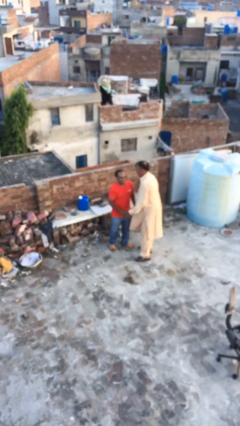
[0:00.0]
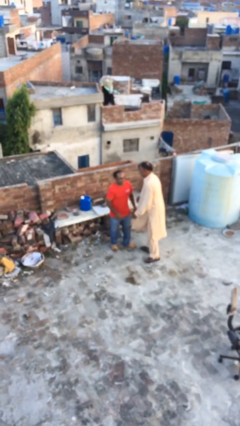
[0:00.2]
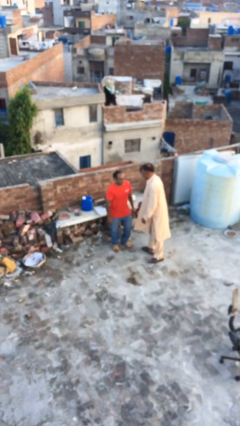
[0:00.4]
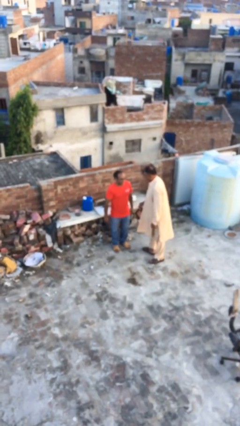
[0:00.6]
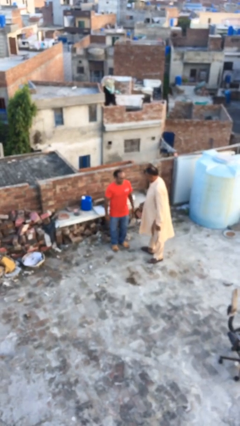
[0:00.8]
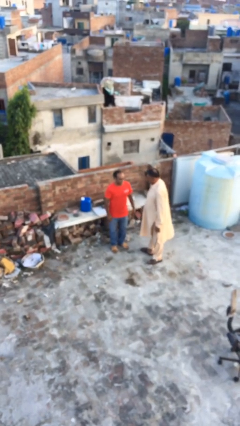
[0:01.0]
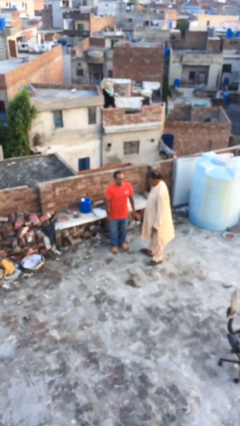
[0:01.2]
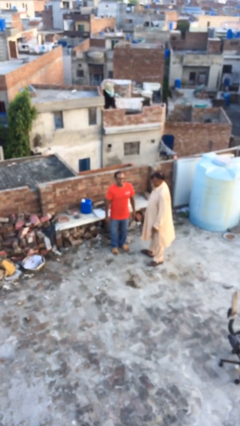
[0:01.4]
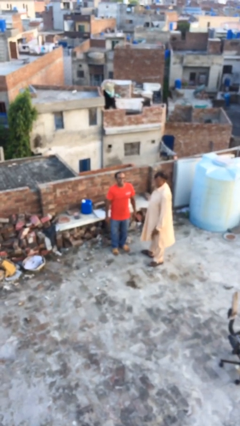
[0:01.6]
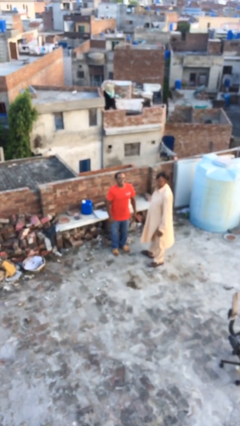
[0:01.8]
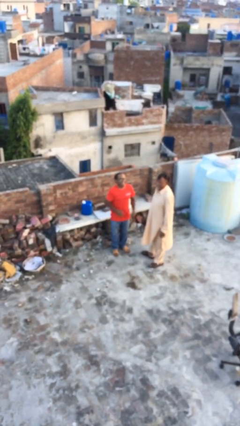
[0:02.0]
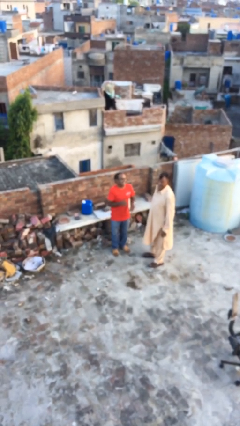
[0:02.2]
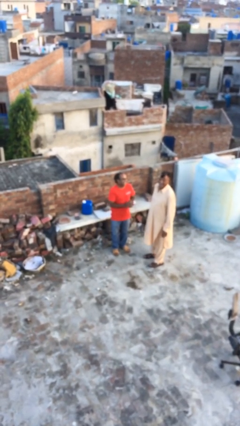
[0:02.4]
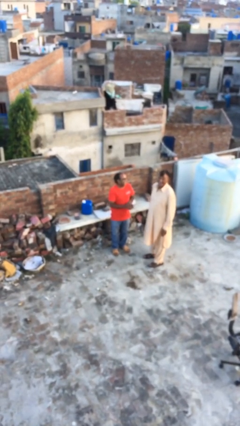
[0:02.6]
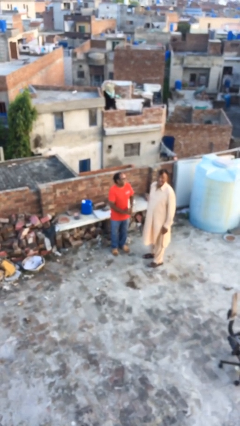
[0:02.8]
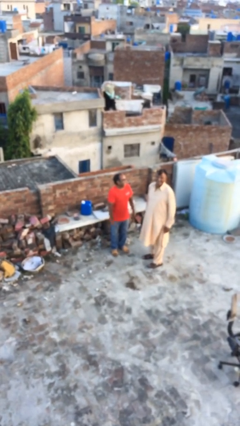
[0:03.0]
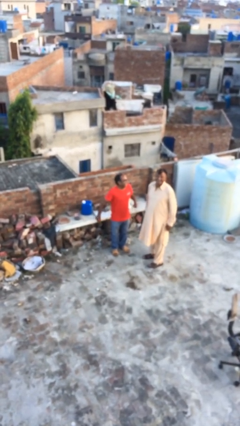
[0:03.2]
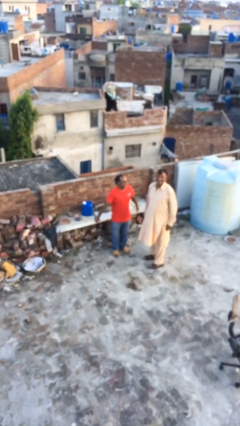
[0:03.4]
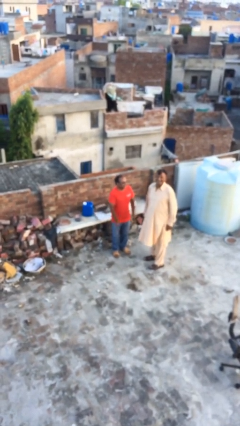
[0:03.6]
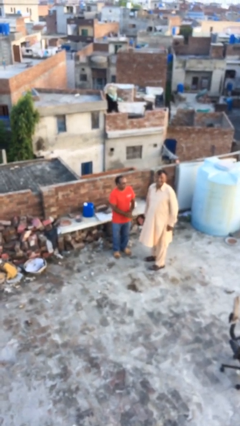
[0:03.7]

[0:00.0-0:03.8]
person talks to person

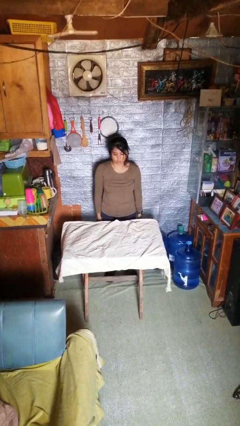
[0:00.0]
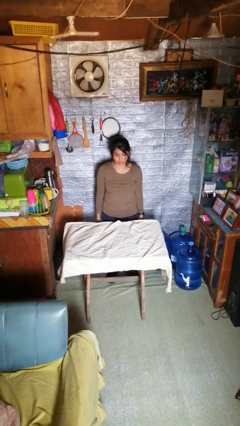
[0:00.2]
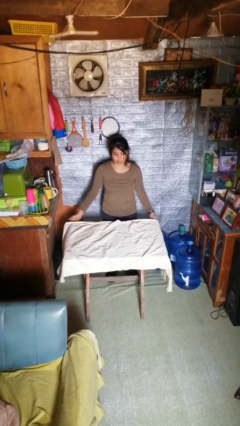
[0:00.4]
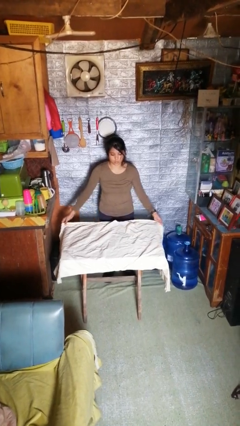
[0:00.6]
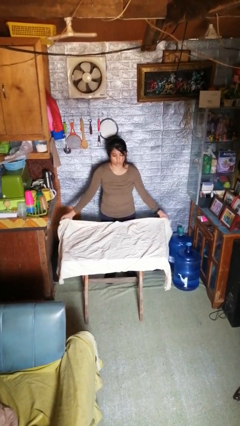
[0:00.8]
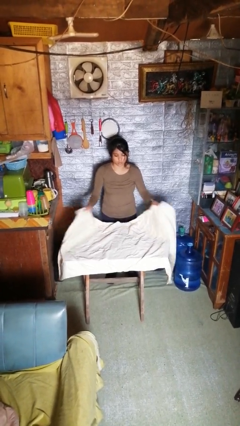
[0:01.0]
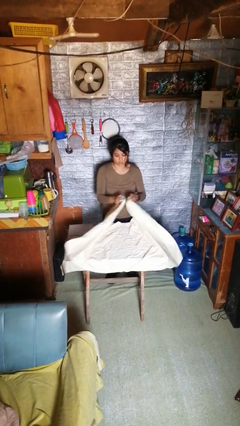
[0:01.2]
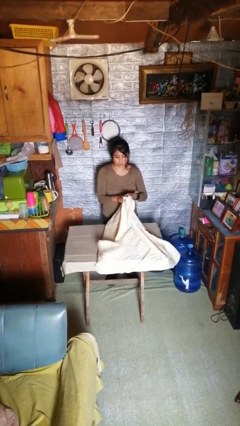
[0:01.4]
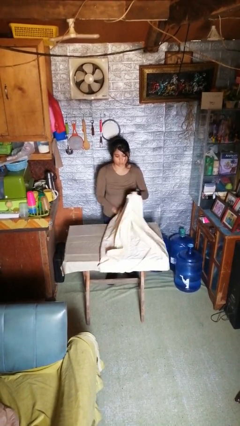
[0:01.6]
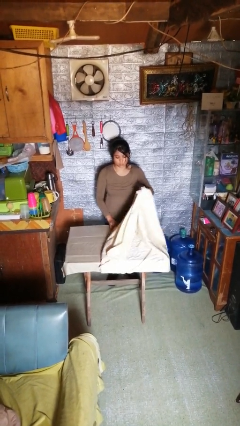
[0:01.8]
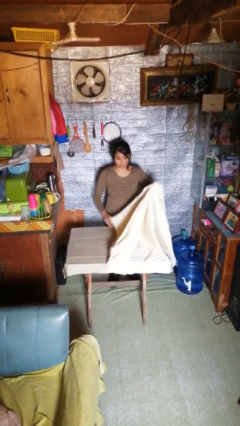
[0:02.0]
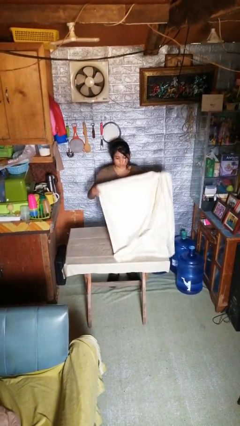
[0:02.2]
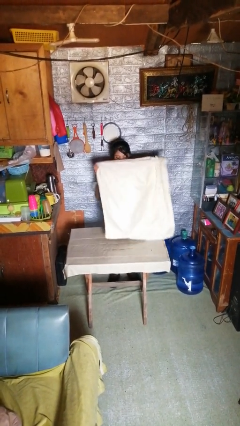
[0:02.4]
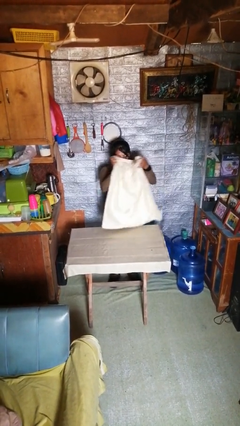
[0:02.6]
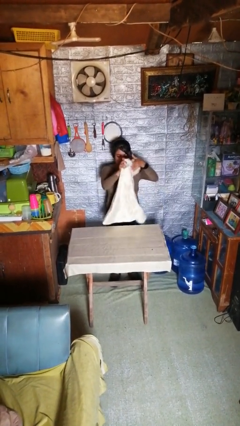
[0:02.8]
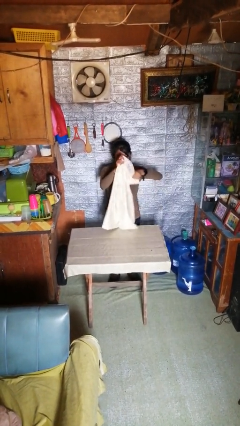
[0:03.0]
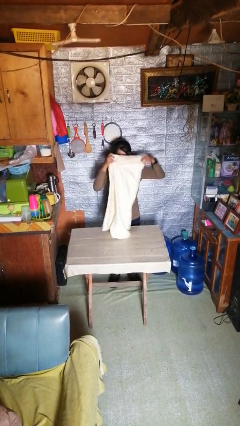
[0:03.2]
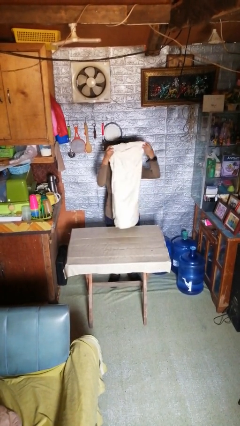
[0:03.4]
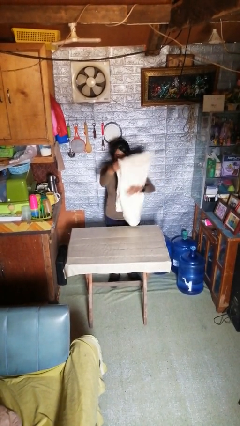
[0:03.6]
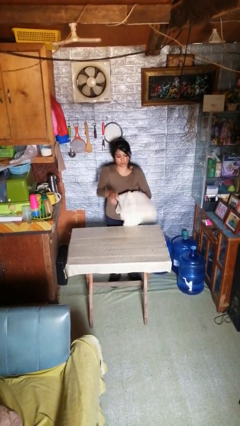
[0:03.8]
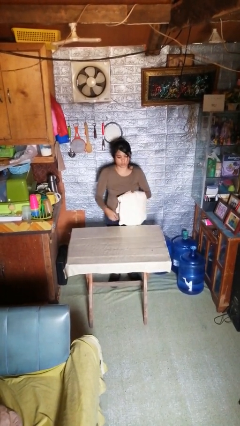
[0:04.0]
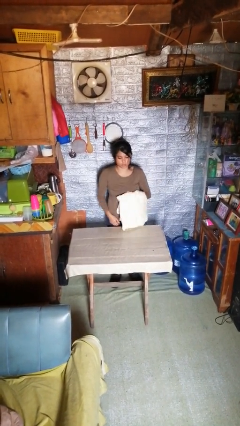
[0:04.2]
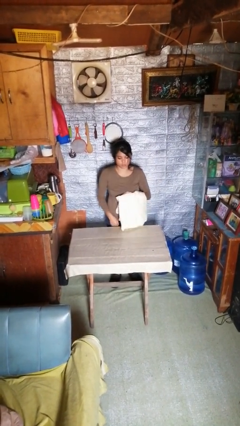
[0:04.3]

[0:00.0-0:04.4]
person folds tablecloth

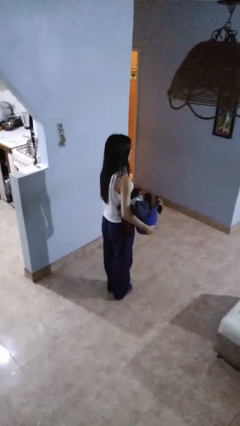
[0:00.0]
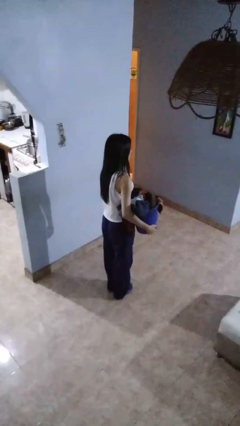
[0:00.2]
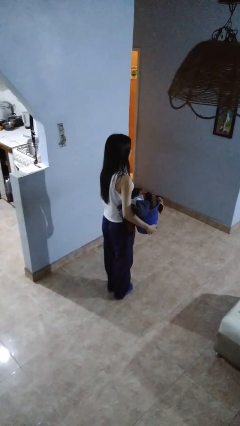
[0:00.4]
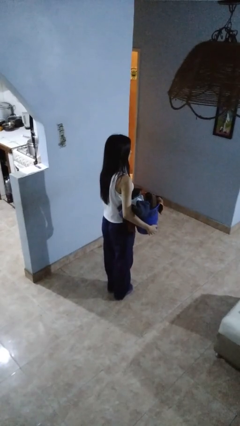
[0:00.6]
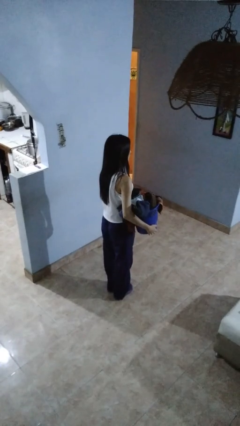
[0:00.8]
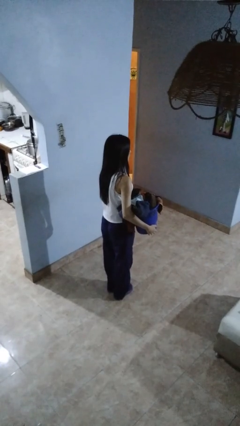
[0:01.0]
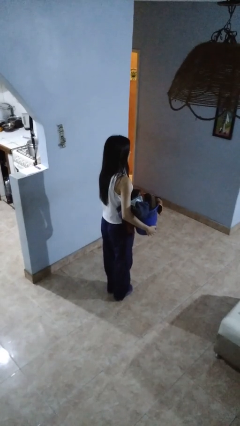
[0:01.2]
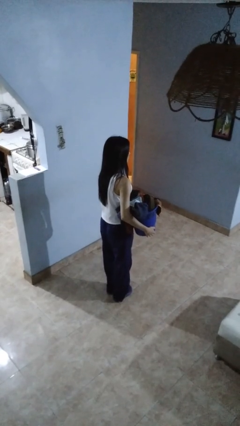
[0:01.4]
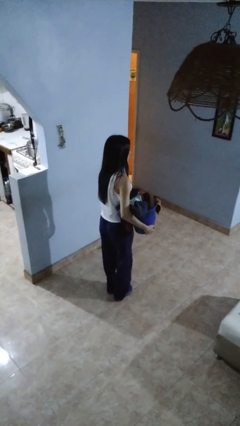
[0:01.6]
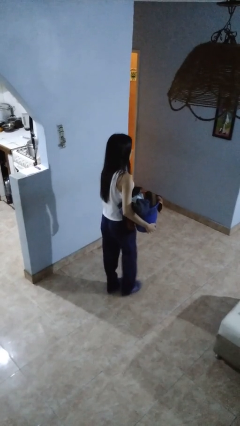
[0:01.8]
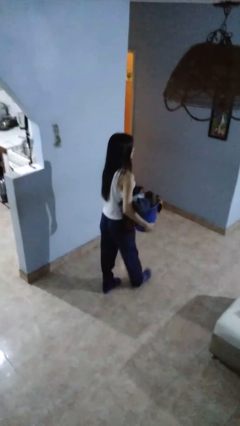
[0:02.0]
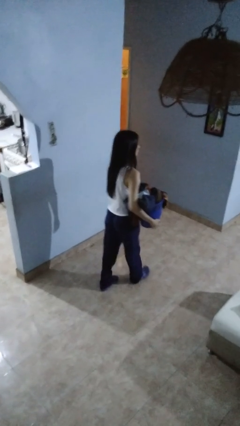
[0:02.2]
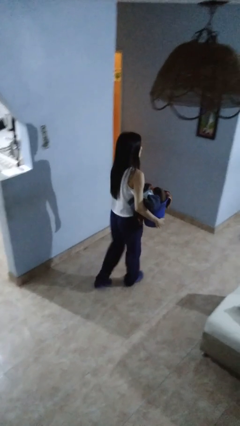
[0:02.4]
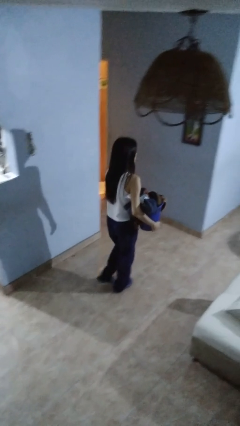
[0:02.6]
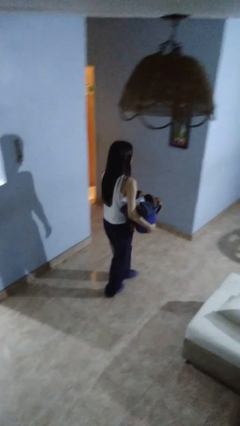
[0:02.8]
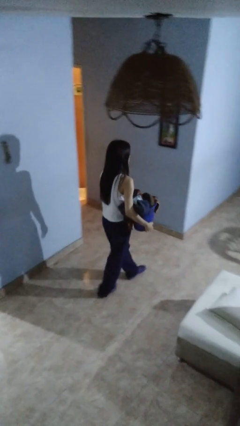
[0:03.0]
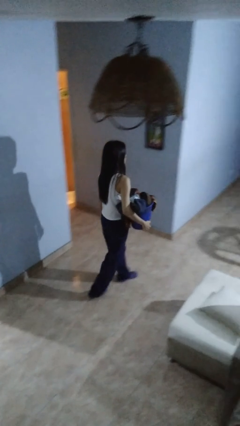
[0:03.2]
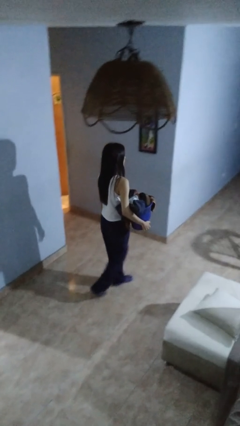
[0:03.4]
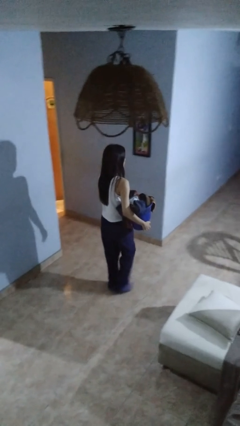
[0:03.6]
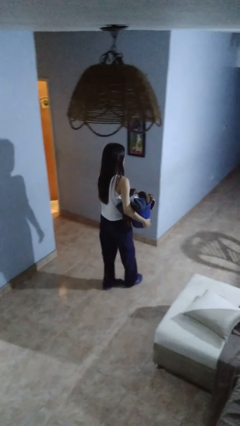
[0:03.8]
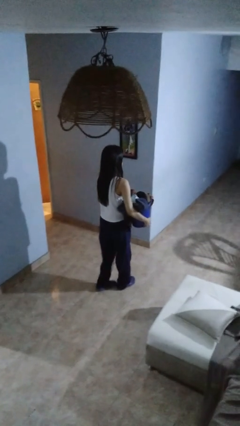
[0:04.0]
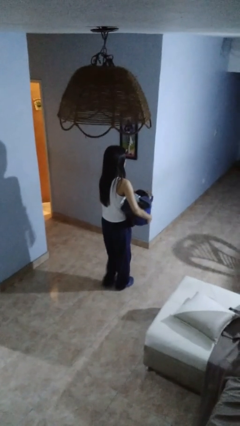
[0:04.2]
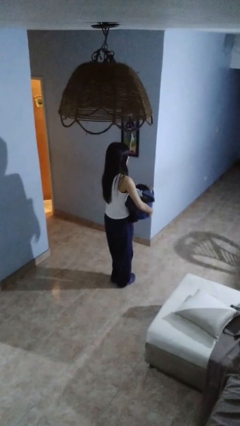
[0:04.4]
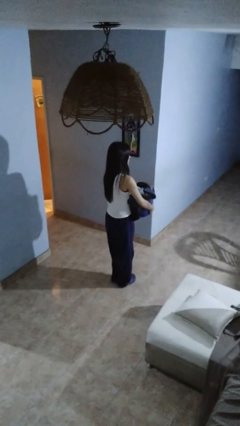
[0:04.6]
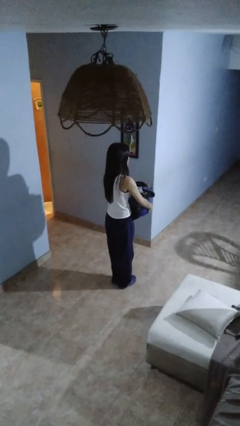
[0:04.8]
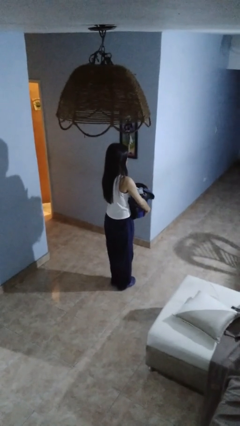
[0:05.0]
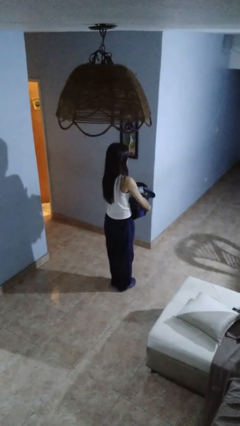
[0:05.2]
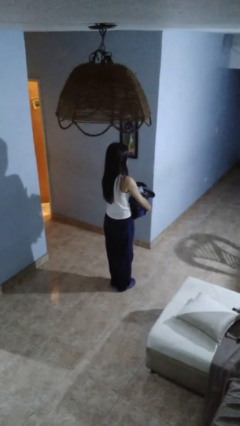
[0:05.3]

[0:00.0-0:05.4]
person carries laundry basket

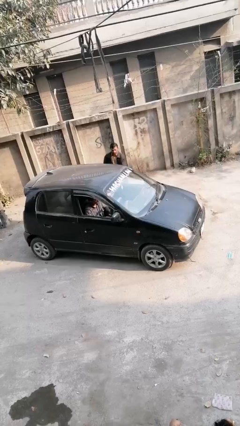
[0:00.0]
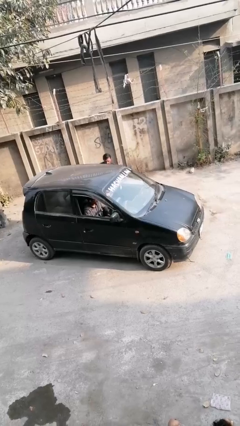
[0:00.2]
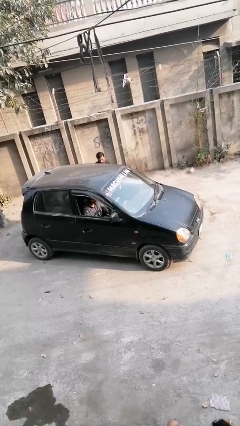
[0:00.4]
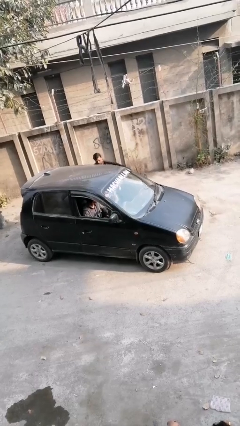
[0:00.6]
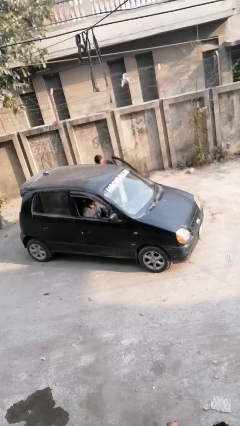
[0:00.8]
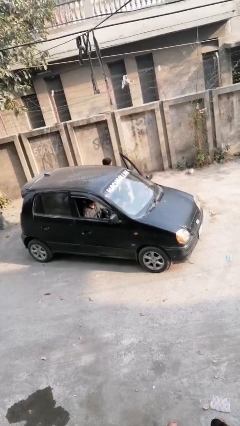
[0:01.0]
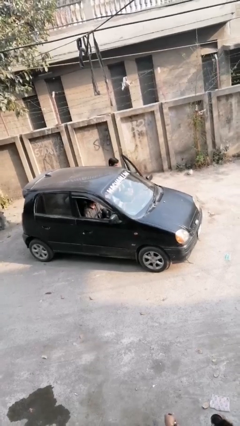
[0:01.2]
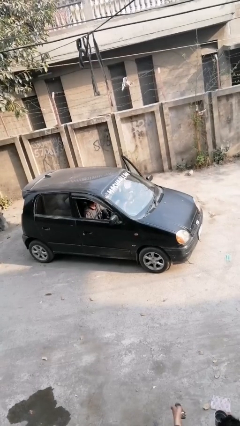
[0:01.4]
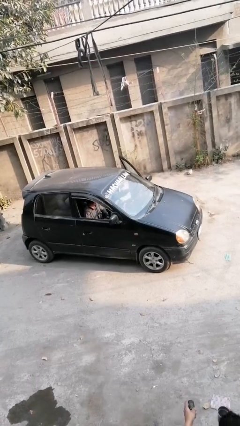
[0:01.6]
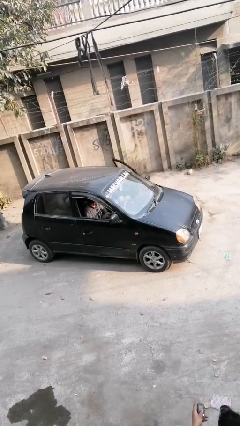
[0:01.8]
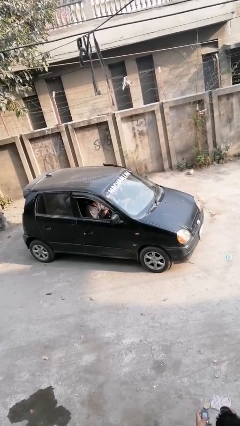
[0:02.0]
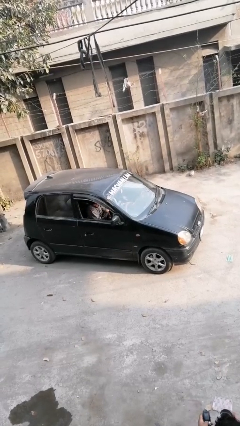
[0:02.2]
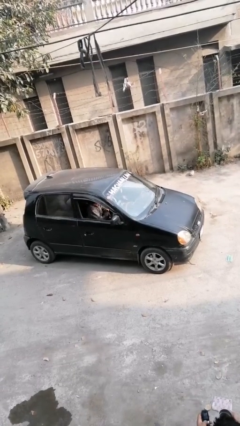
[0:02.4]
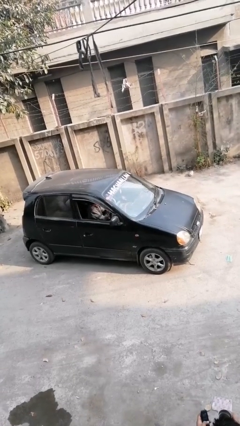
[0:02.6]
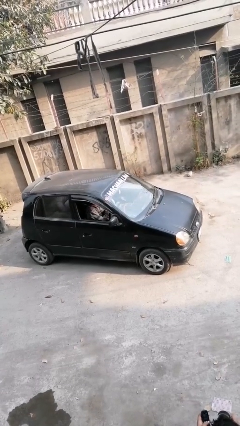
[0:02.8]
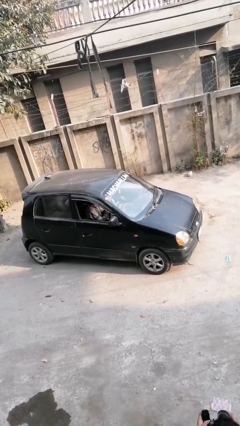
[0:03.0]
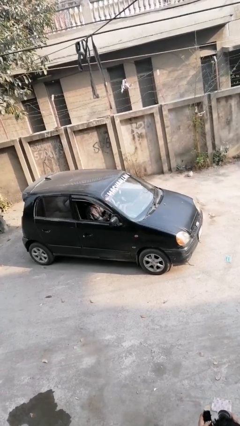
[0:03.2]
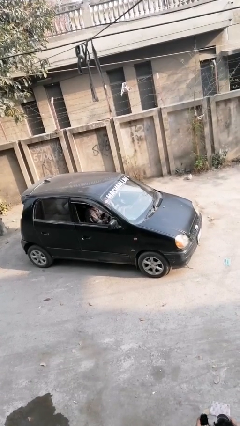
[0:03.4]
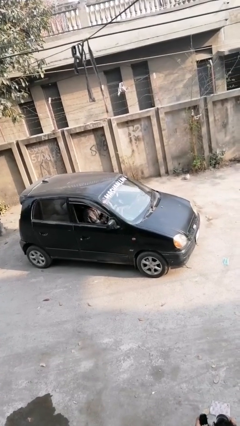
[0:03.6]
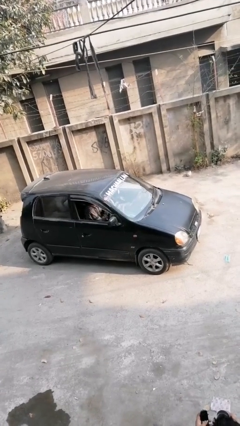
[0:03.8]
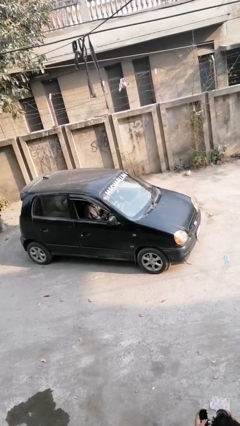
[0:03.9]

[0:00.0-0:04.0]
car picks up person

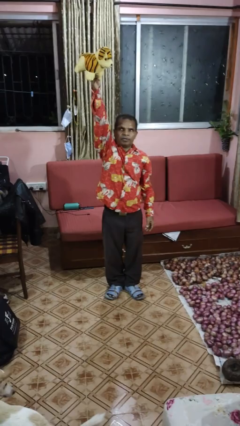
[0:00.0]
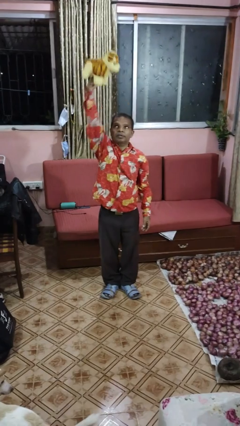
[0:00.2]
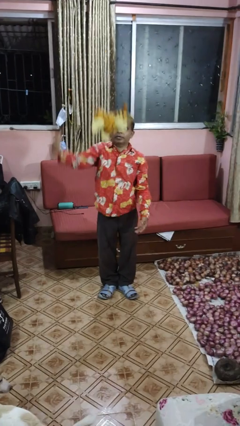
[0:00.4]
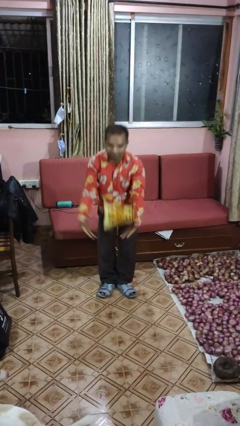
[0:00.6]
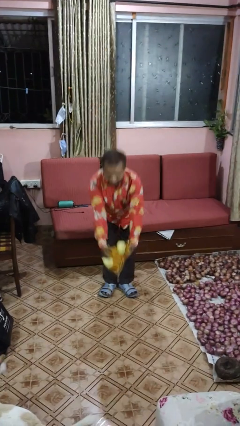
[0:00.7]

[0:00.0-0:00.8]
person drops object
